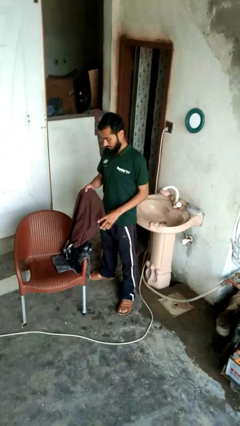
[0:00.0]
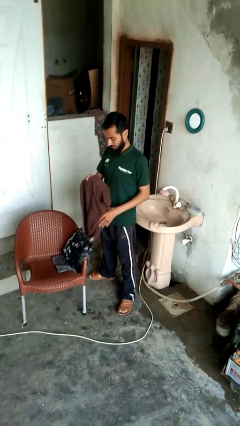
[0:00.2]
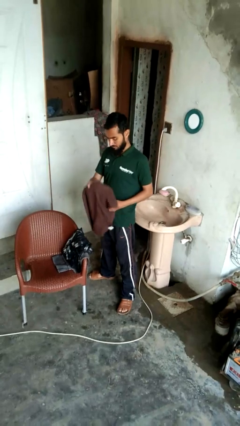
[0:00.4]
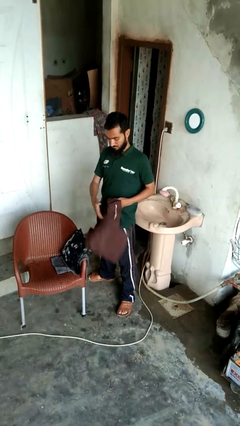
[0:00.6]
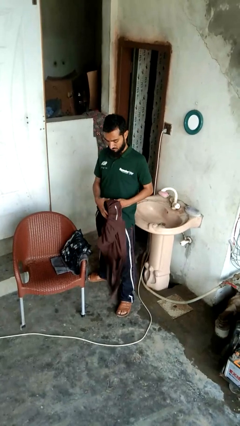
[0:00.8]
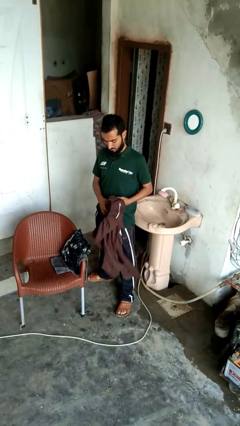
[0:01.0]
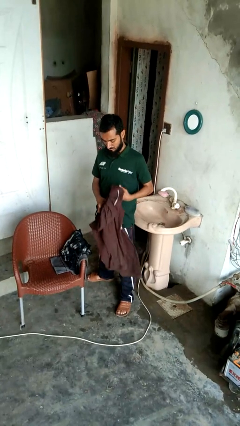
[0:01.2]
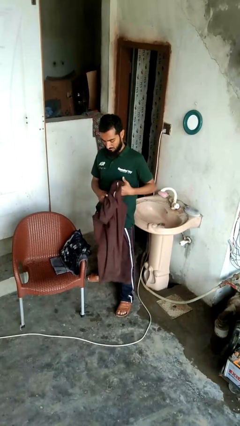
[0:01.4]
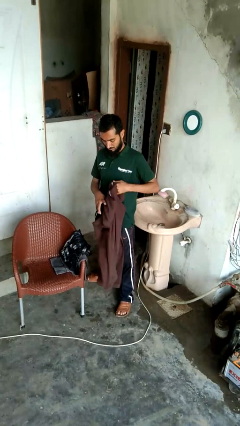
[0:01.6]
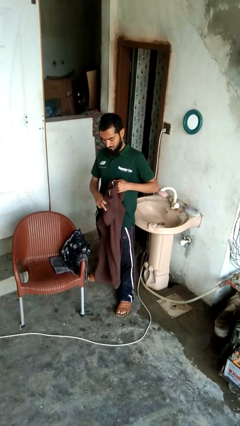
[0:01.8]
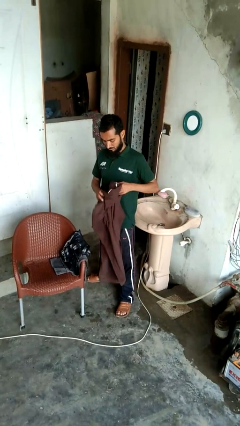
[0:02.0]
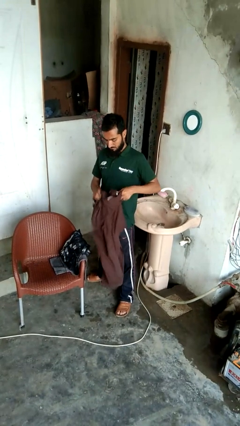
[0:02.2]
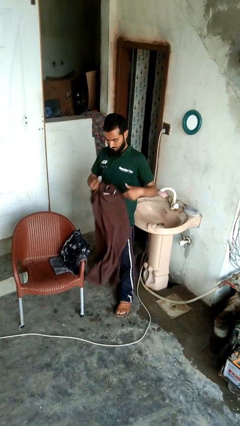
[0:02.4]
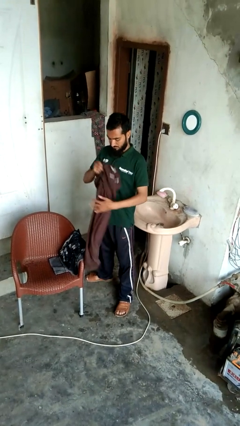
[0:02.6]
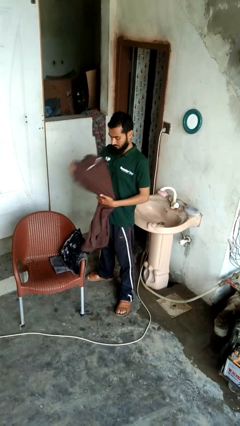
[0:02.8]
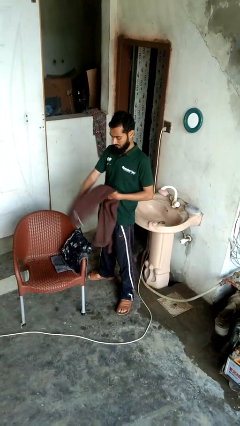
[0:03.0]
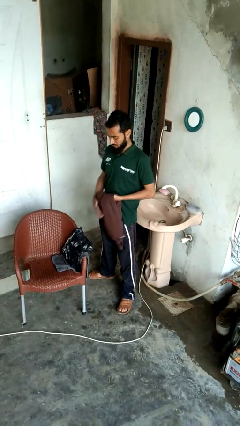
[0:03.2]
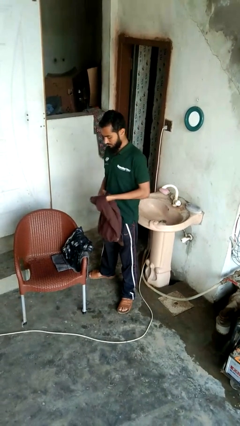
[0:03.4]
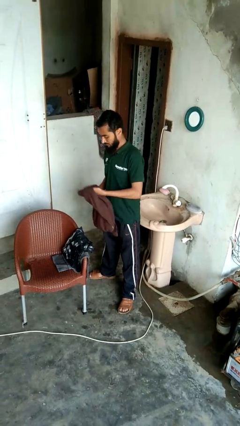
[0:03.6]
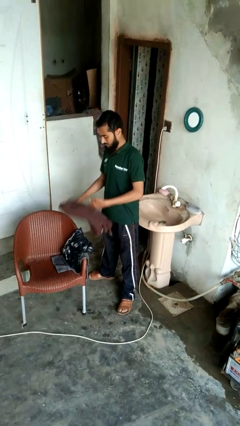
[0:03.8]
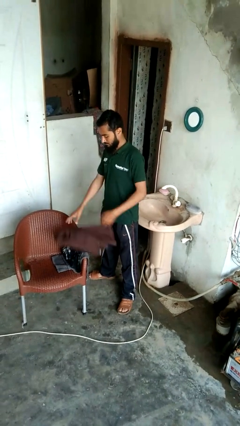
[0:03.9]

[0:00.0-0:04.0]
person folds pants

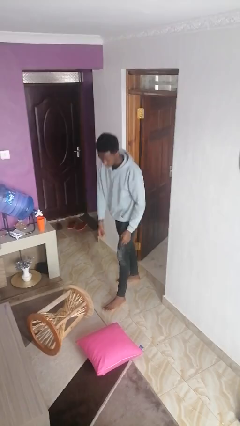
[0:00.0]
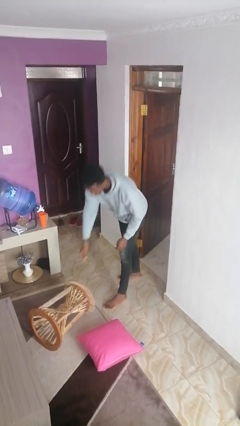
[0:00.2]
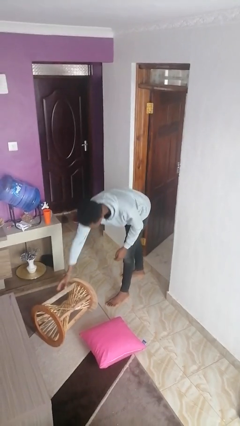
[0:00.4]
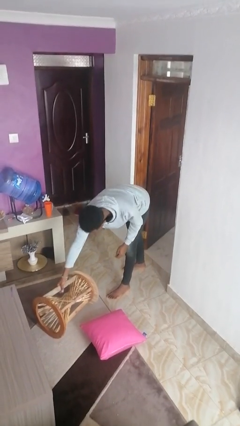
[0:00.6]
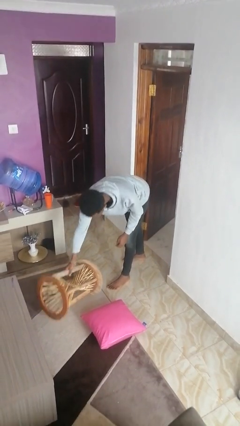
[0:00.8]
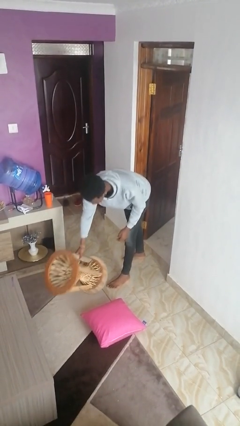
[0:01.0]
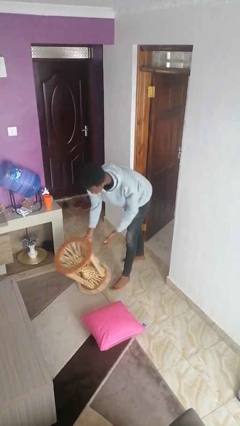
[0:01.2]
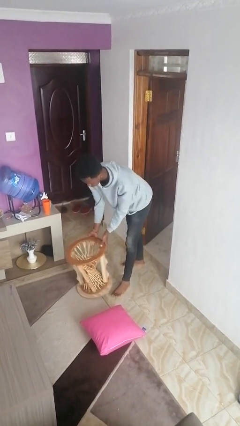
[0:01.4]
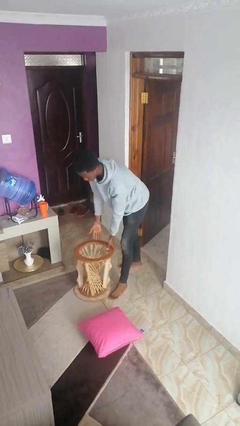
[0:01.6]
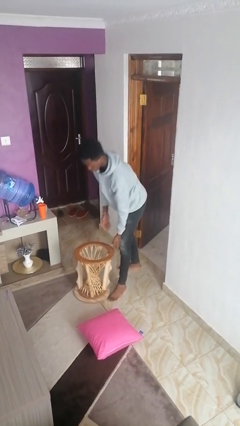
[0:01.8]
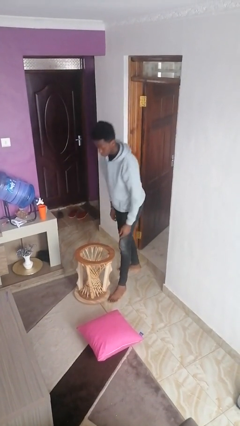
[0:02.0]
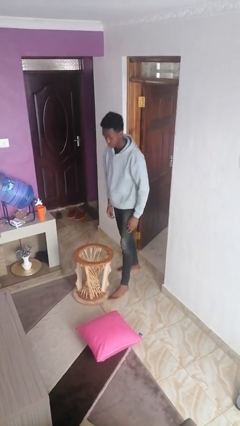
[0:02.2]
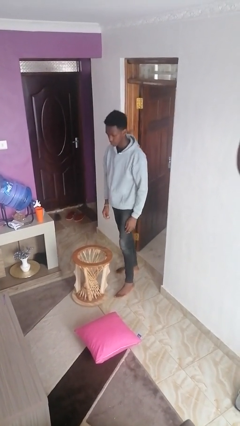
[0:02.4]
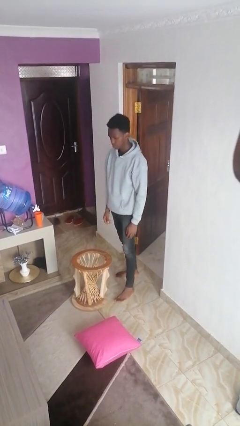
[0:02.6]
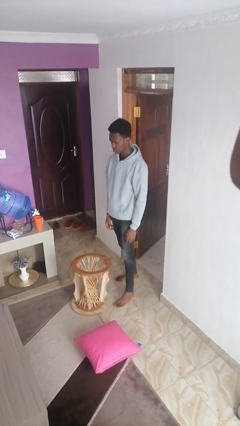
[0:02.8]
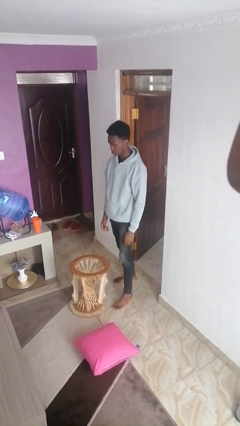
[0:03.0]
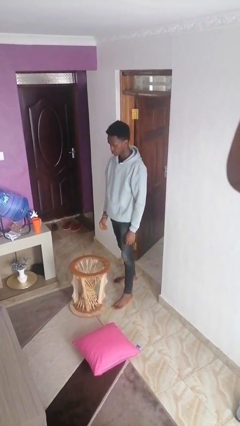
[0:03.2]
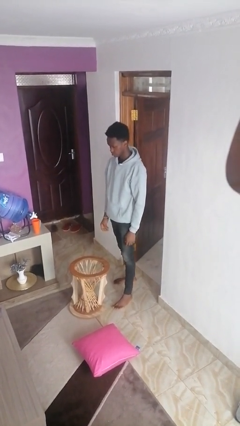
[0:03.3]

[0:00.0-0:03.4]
person sets upright furniture

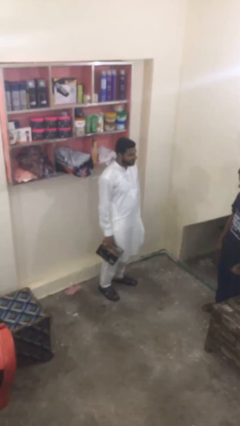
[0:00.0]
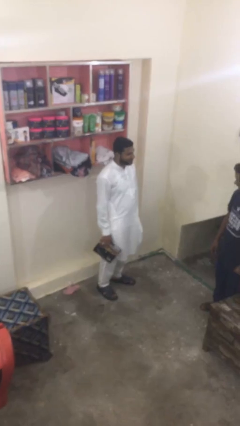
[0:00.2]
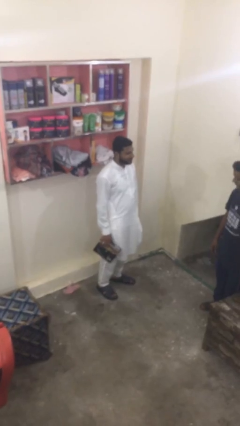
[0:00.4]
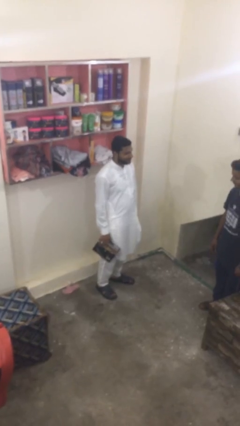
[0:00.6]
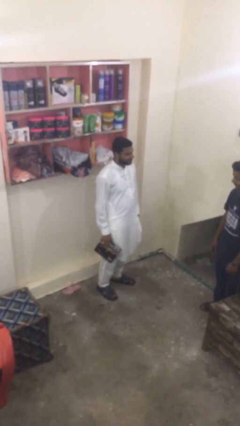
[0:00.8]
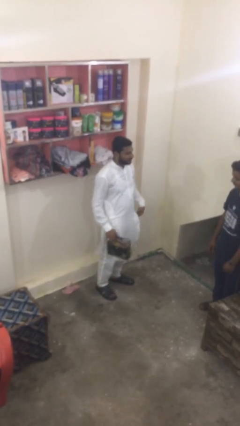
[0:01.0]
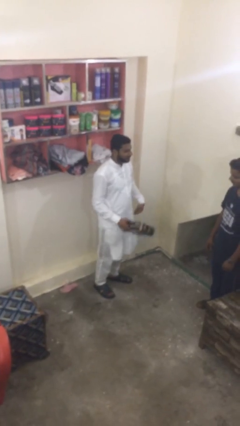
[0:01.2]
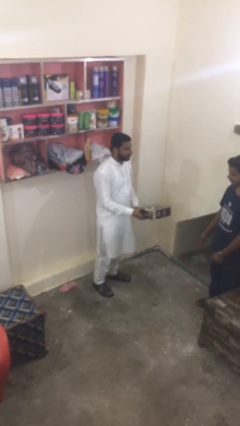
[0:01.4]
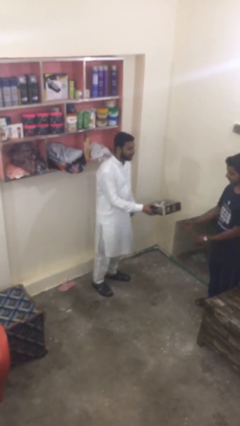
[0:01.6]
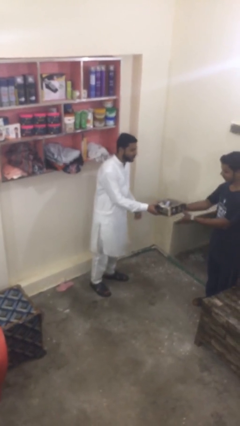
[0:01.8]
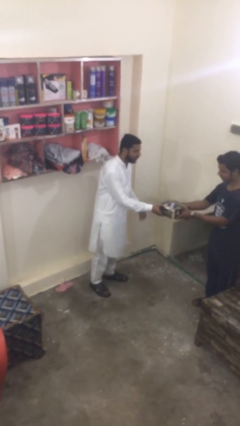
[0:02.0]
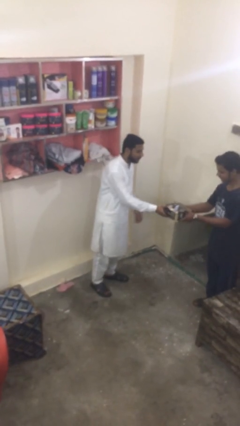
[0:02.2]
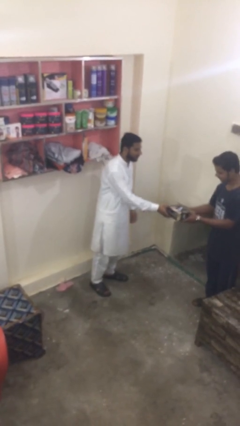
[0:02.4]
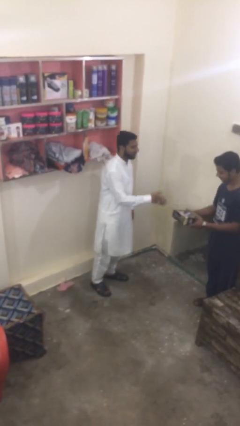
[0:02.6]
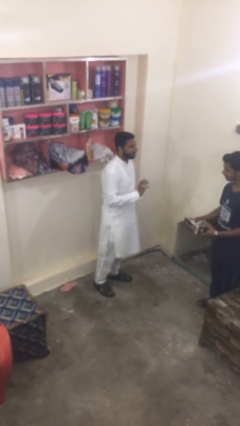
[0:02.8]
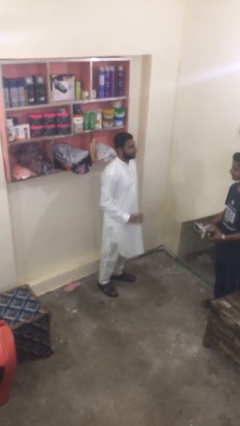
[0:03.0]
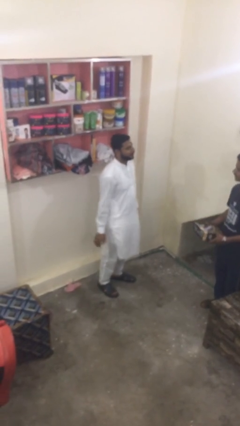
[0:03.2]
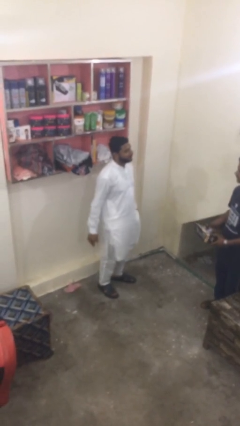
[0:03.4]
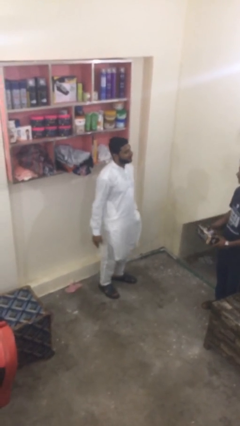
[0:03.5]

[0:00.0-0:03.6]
person transfers object to person

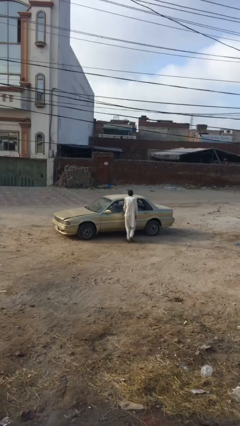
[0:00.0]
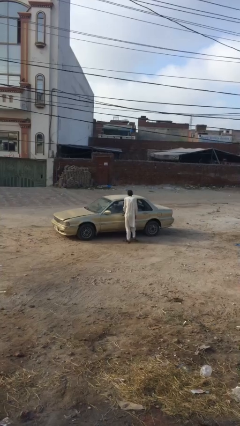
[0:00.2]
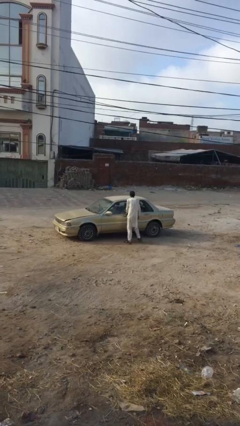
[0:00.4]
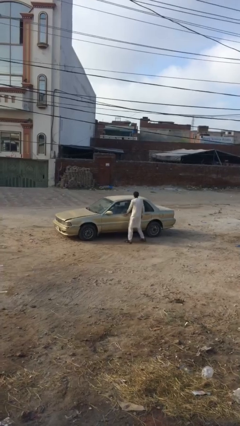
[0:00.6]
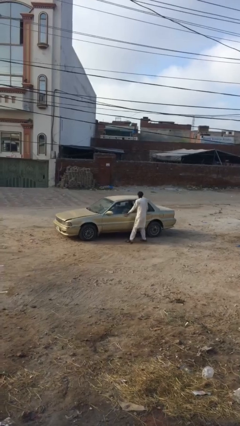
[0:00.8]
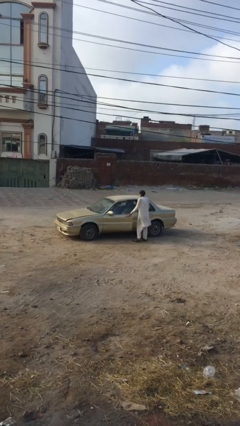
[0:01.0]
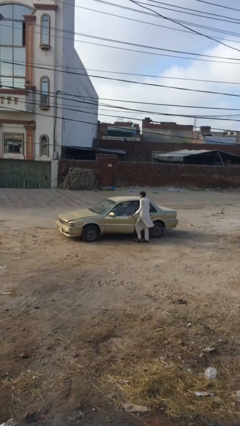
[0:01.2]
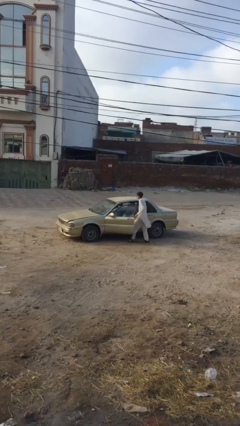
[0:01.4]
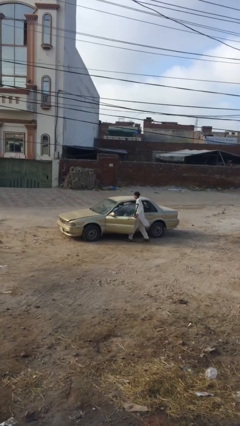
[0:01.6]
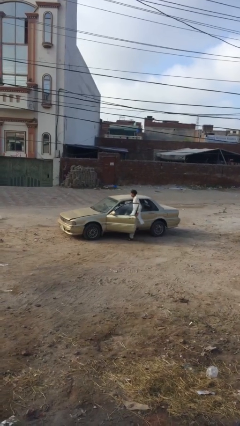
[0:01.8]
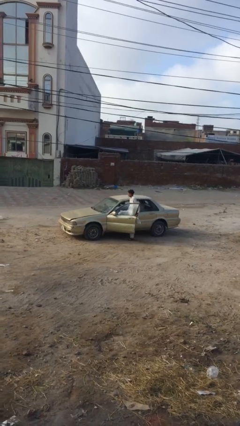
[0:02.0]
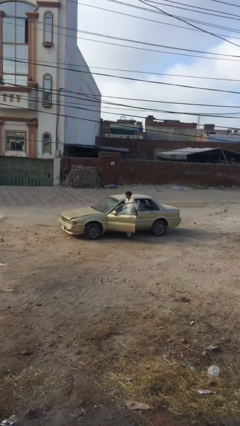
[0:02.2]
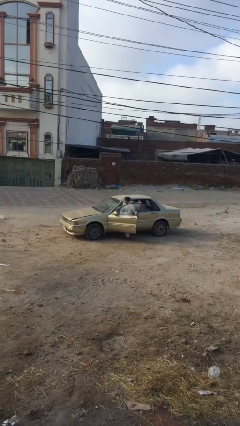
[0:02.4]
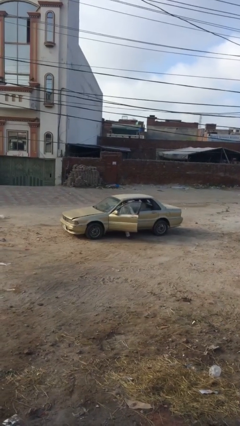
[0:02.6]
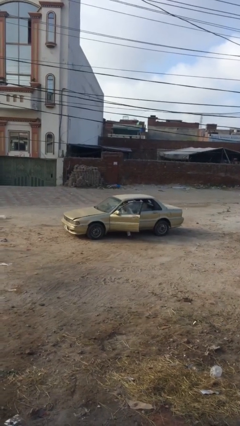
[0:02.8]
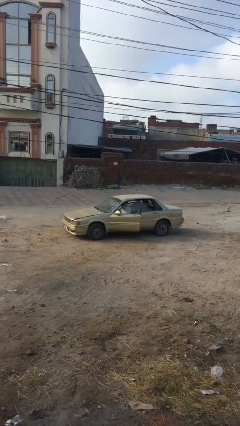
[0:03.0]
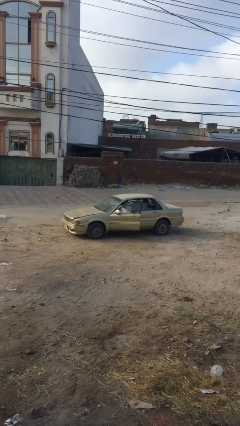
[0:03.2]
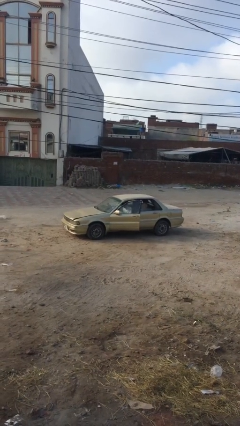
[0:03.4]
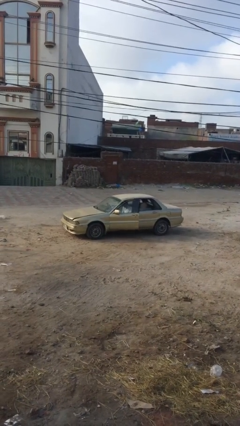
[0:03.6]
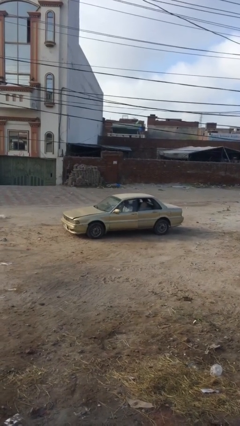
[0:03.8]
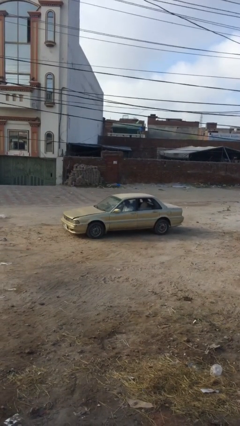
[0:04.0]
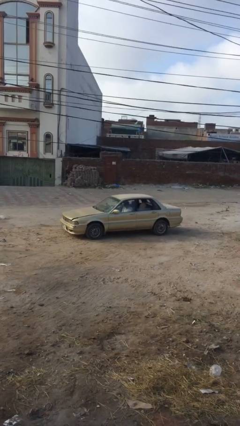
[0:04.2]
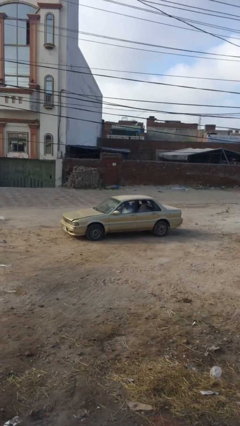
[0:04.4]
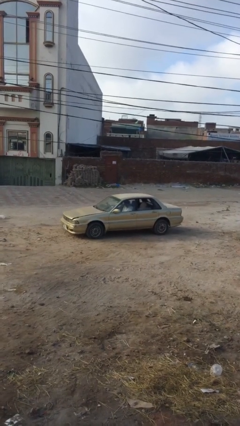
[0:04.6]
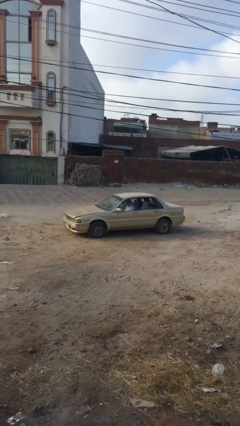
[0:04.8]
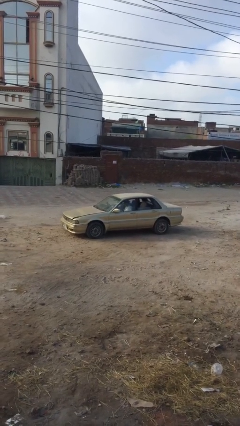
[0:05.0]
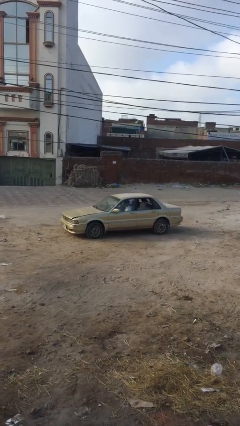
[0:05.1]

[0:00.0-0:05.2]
car picks up person

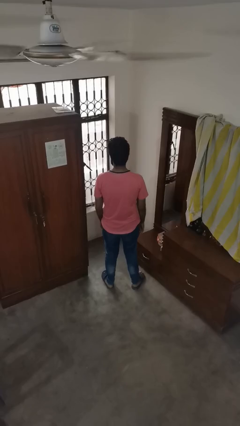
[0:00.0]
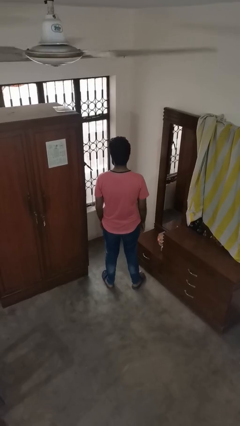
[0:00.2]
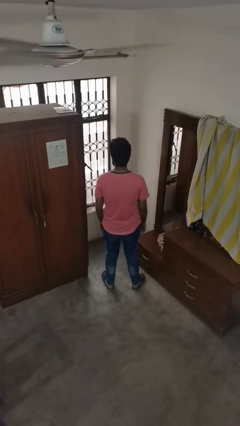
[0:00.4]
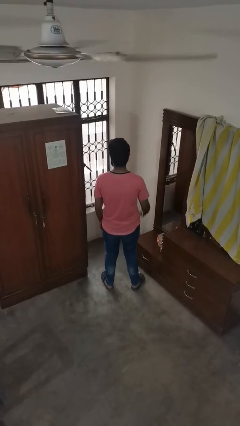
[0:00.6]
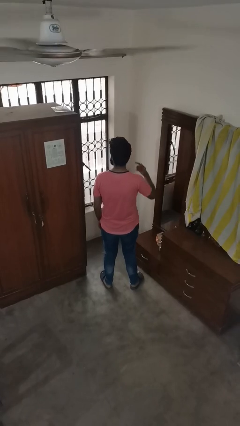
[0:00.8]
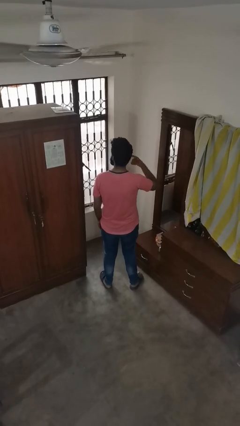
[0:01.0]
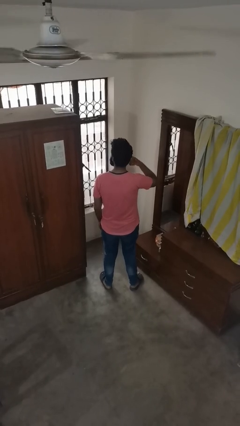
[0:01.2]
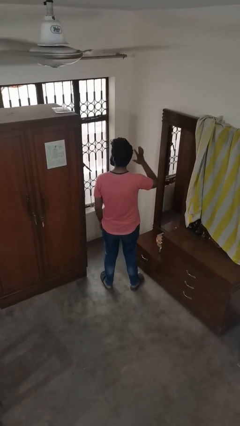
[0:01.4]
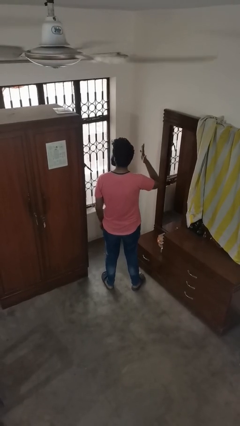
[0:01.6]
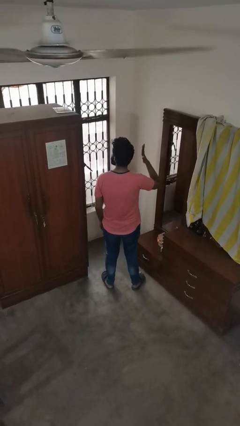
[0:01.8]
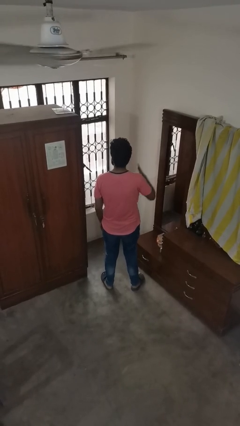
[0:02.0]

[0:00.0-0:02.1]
person puts fingers in ear
